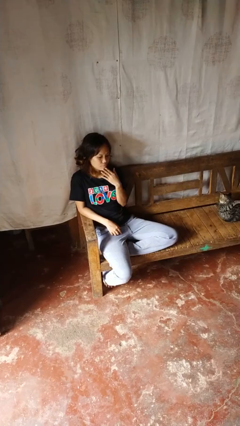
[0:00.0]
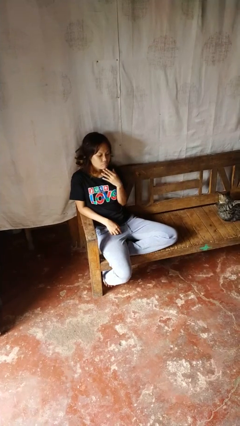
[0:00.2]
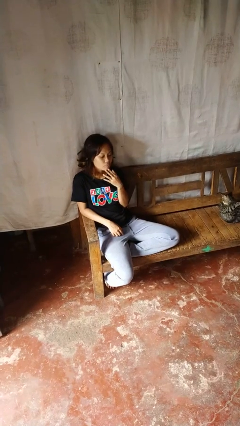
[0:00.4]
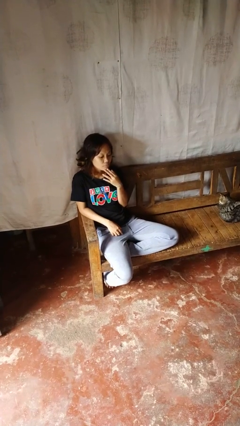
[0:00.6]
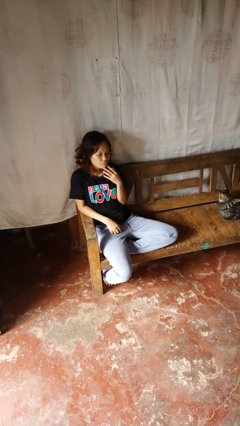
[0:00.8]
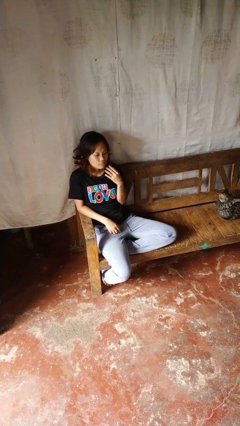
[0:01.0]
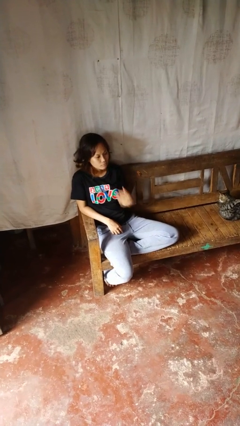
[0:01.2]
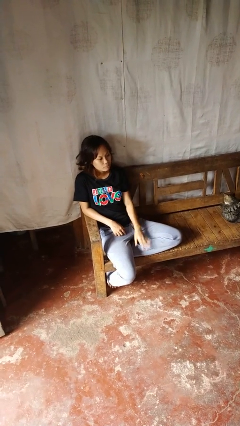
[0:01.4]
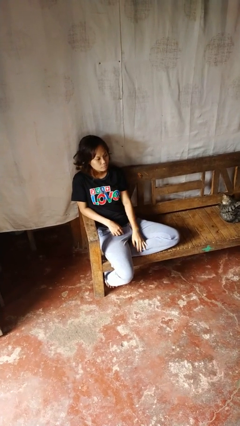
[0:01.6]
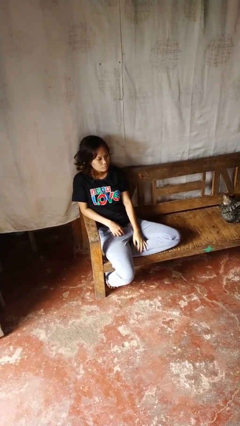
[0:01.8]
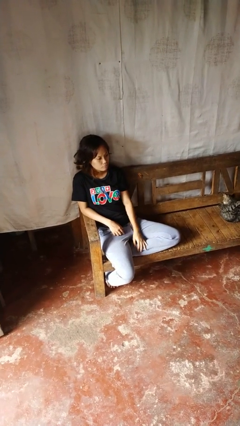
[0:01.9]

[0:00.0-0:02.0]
person strokes chin

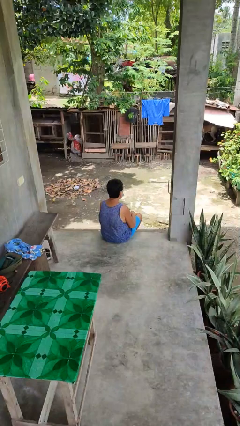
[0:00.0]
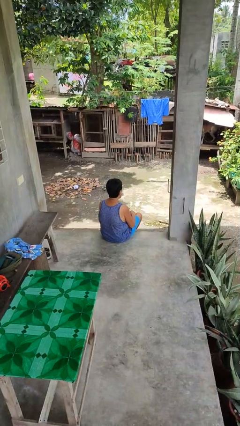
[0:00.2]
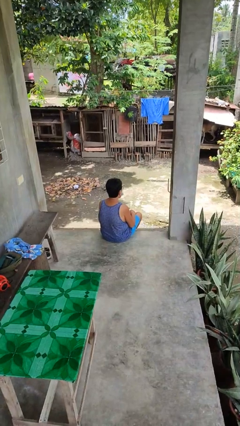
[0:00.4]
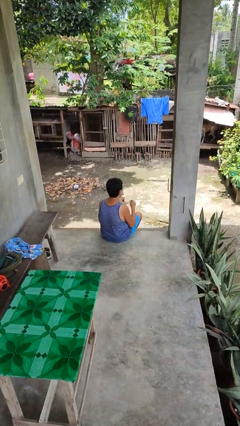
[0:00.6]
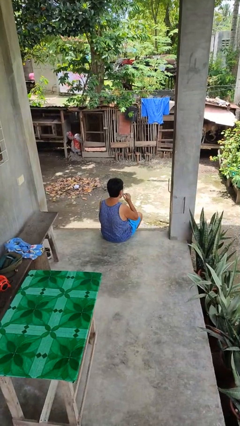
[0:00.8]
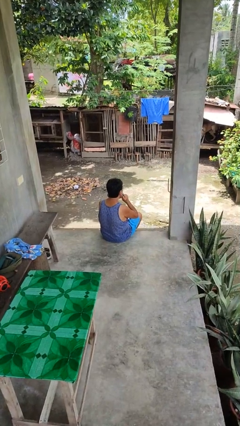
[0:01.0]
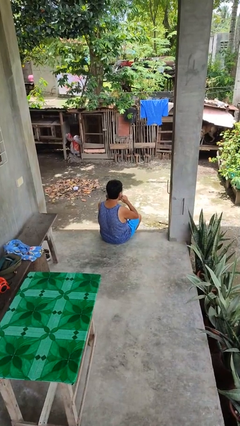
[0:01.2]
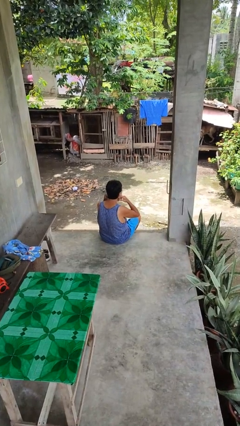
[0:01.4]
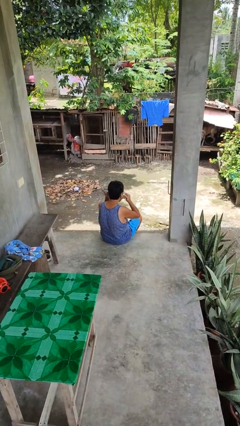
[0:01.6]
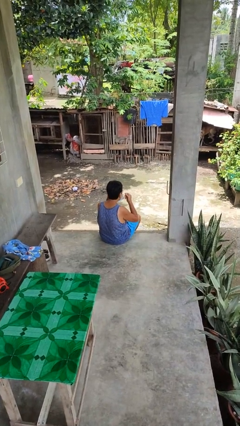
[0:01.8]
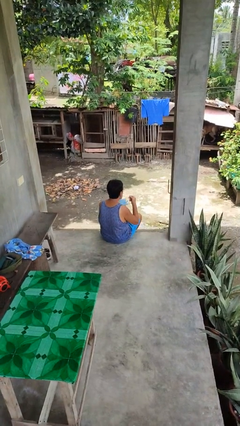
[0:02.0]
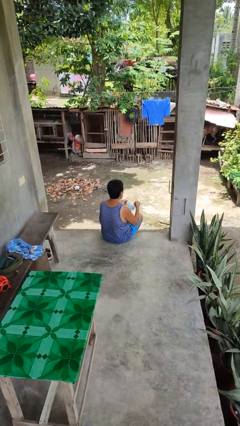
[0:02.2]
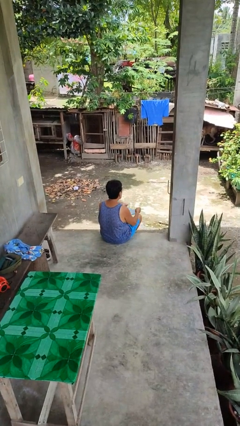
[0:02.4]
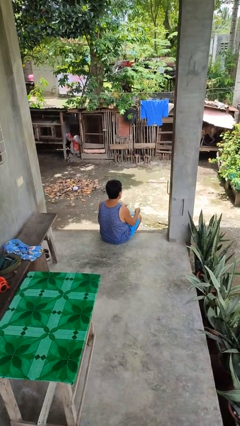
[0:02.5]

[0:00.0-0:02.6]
person takes off facemask

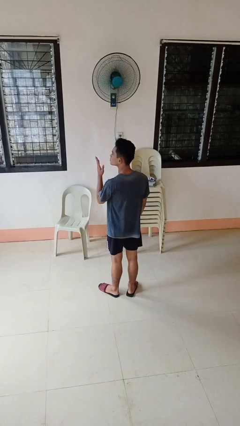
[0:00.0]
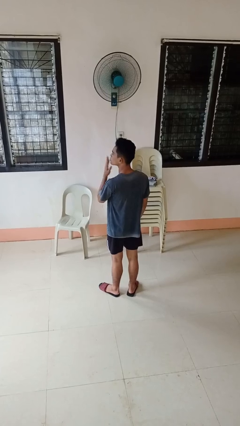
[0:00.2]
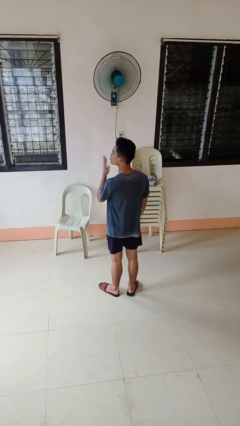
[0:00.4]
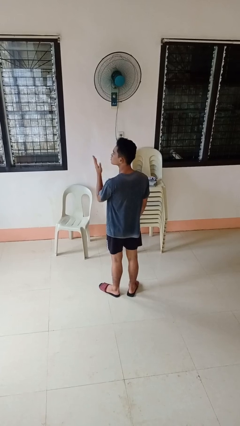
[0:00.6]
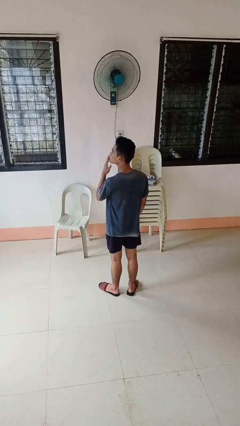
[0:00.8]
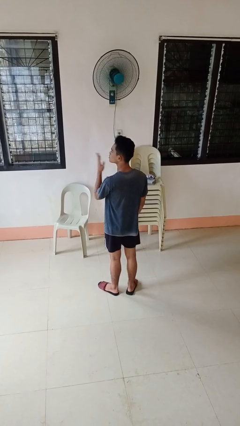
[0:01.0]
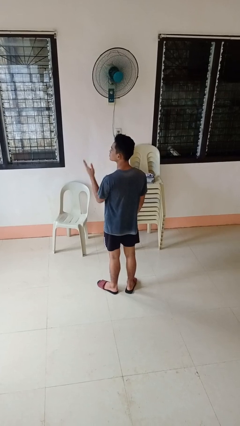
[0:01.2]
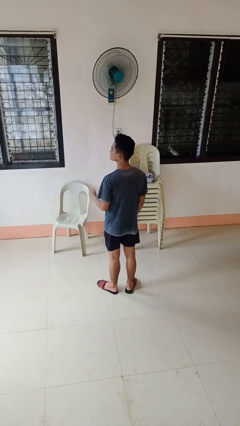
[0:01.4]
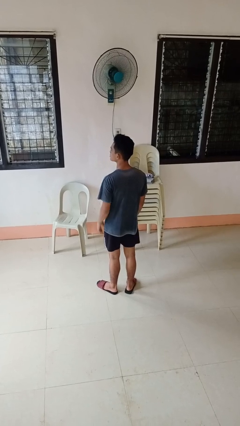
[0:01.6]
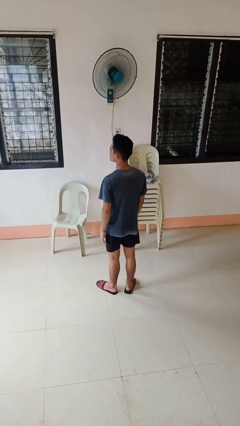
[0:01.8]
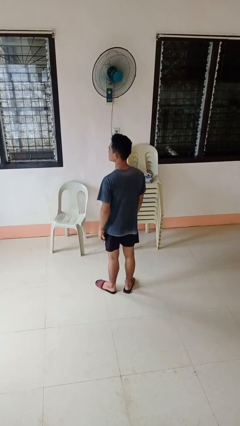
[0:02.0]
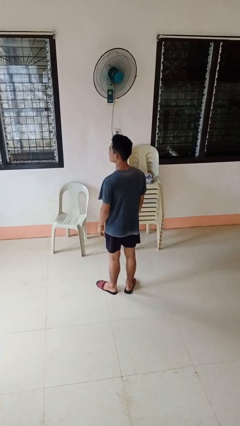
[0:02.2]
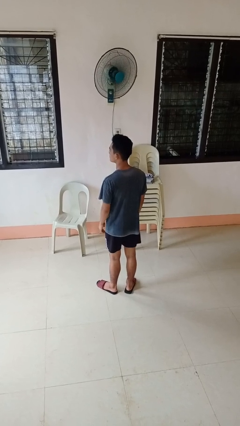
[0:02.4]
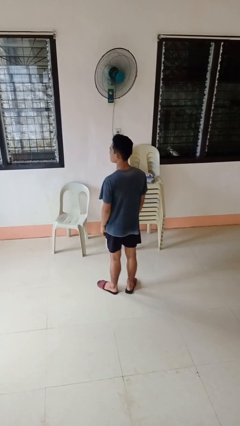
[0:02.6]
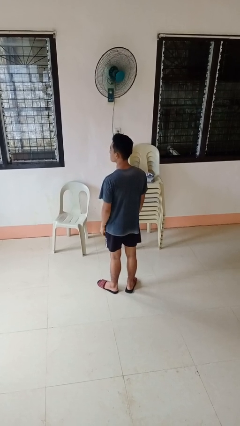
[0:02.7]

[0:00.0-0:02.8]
person gestures blow kiss

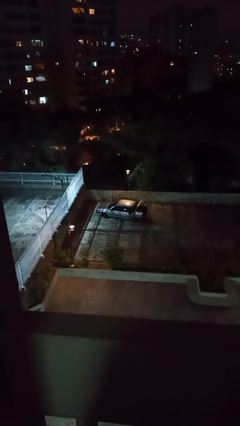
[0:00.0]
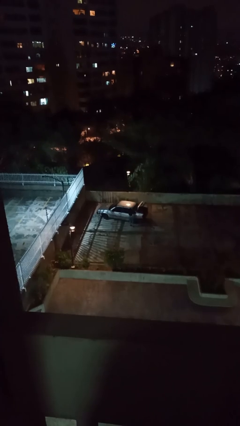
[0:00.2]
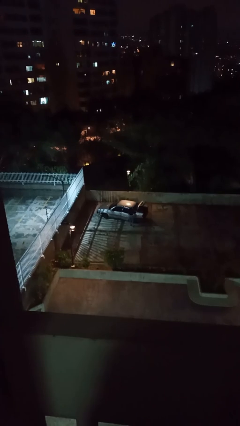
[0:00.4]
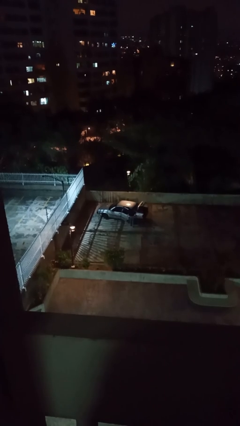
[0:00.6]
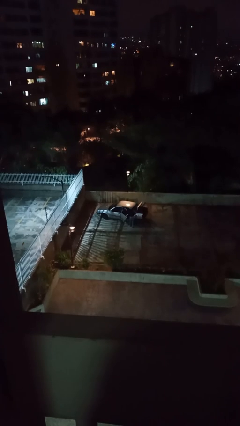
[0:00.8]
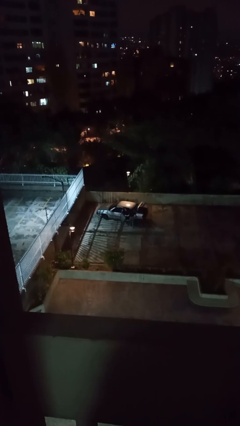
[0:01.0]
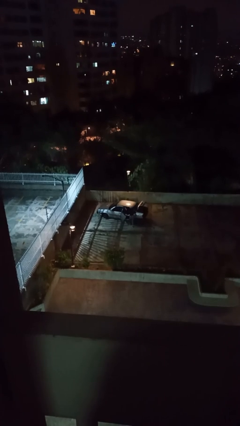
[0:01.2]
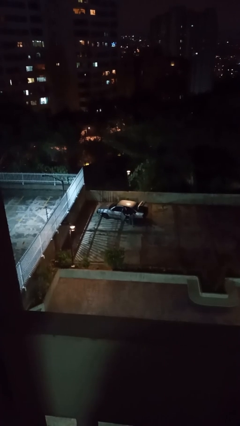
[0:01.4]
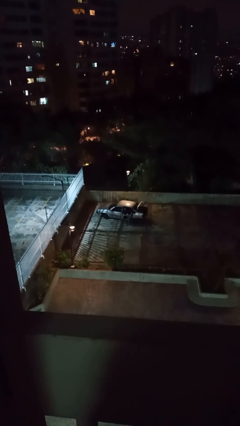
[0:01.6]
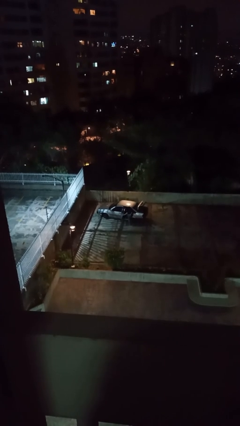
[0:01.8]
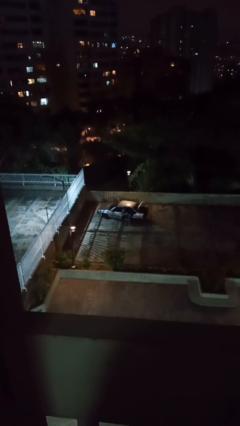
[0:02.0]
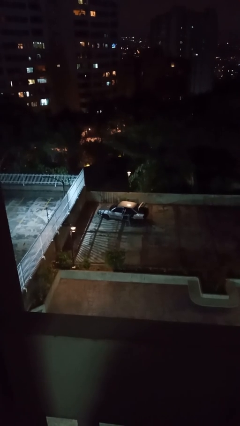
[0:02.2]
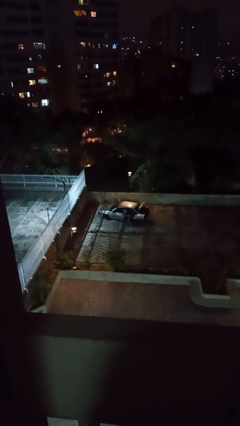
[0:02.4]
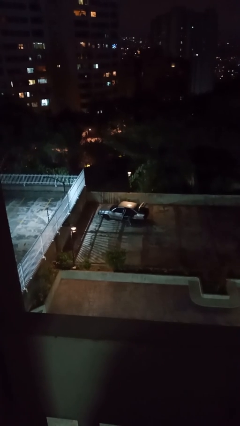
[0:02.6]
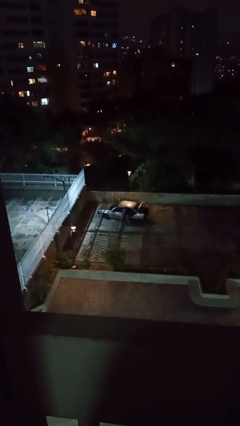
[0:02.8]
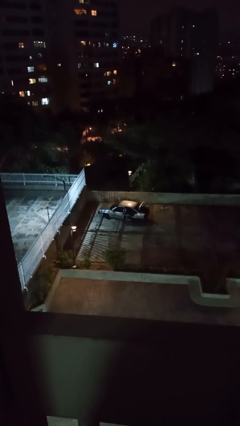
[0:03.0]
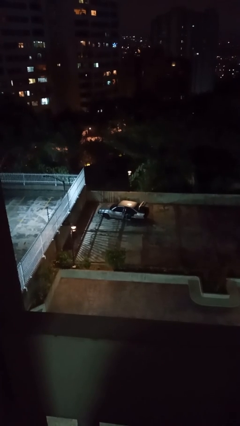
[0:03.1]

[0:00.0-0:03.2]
car picks up person

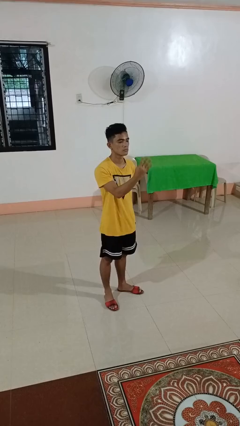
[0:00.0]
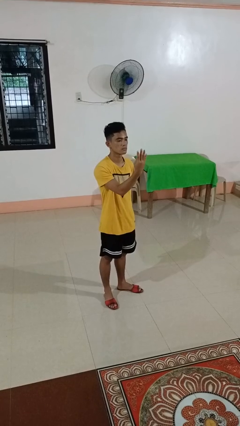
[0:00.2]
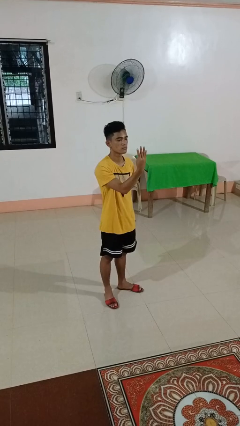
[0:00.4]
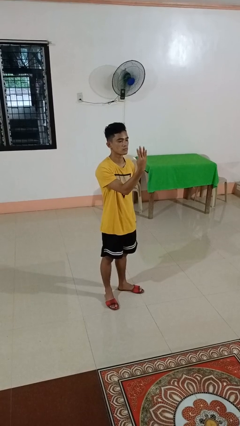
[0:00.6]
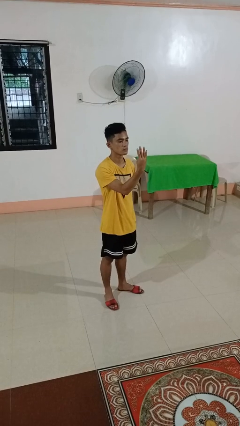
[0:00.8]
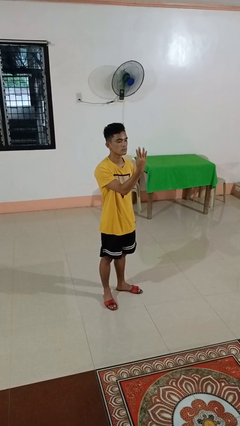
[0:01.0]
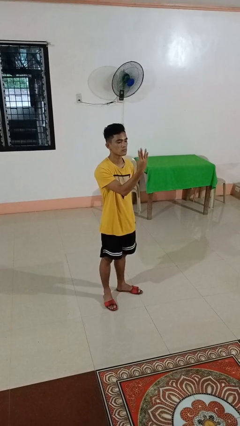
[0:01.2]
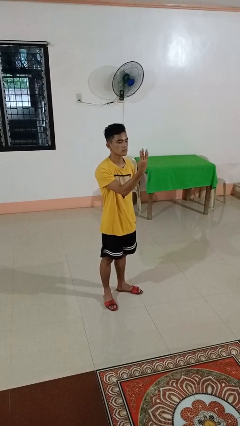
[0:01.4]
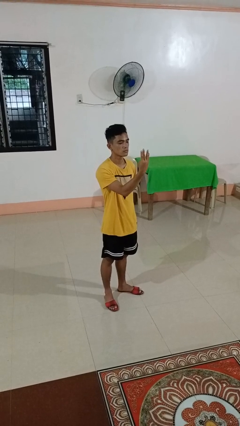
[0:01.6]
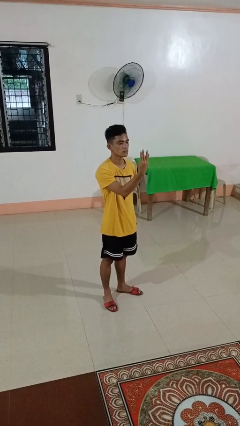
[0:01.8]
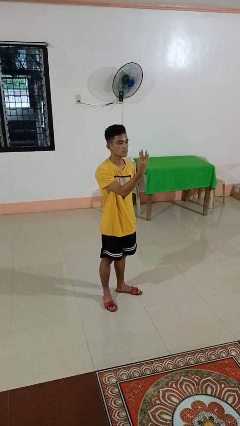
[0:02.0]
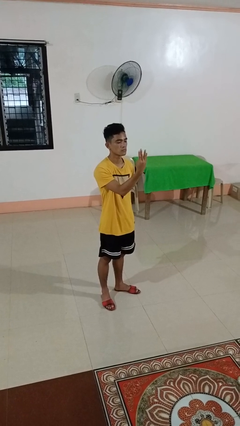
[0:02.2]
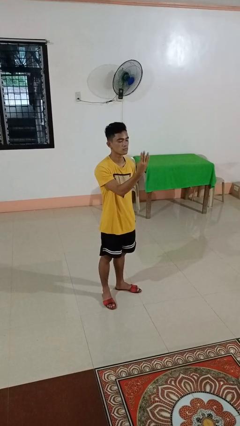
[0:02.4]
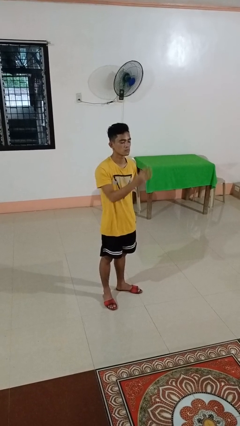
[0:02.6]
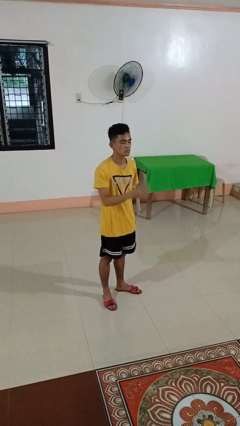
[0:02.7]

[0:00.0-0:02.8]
person gestures number four

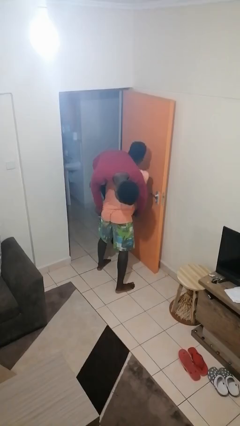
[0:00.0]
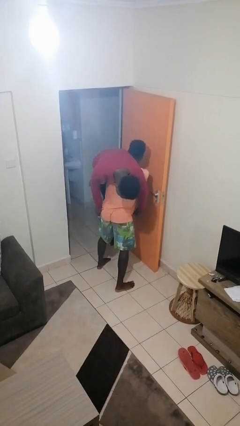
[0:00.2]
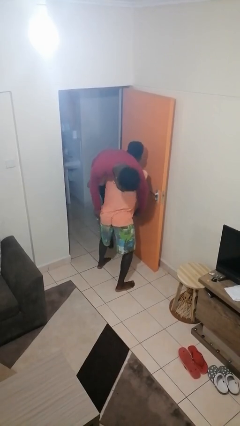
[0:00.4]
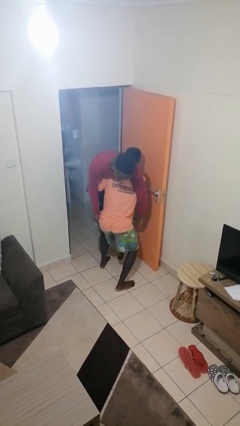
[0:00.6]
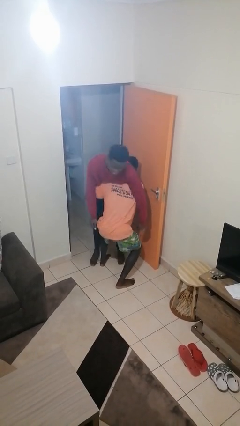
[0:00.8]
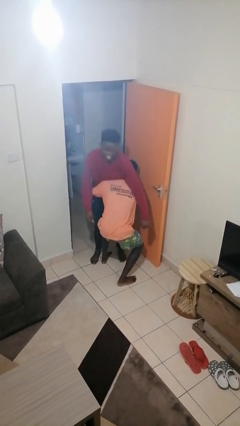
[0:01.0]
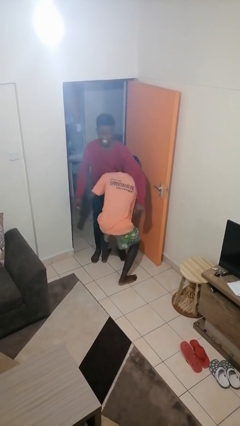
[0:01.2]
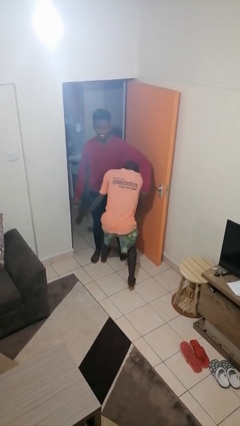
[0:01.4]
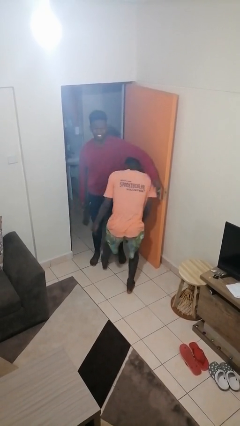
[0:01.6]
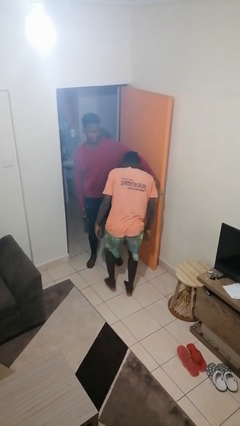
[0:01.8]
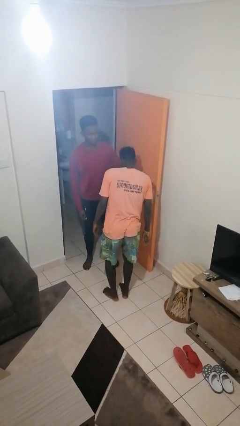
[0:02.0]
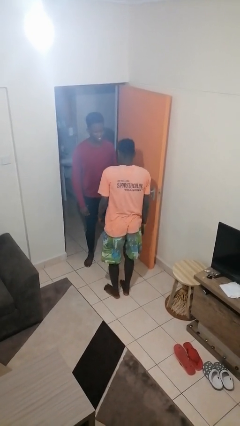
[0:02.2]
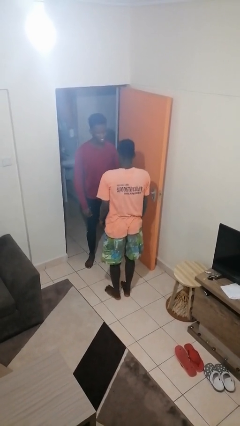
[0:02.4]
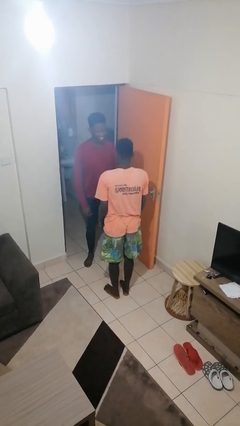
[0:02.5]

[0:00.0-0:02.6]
person puts down person

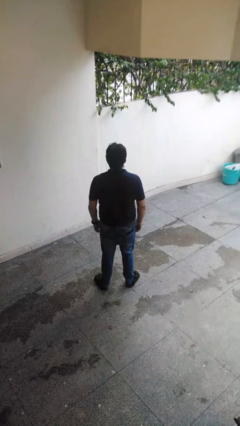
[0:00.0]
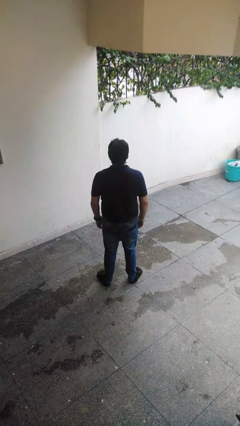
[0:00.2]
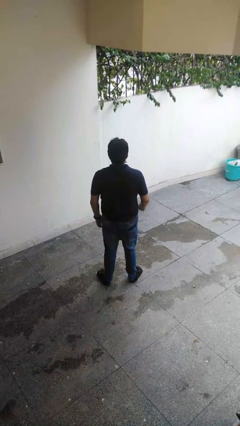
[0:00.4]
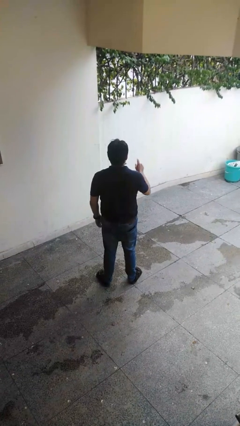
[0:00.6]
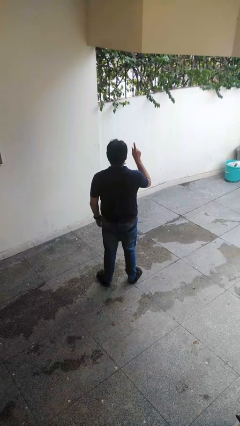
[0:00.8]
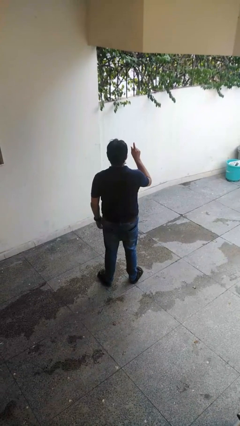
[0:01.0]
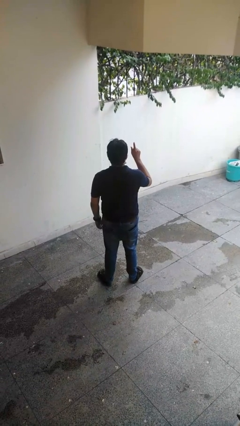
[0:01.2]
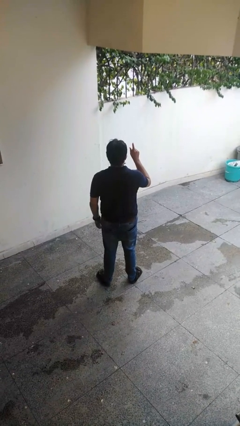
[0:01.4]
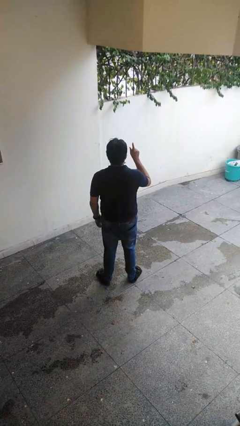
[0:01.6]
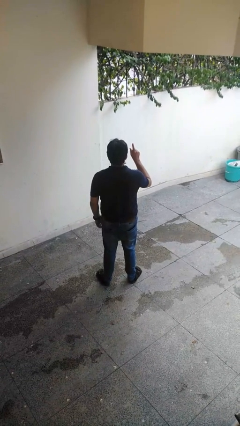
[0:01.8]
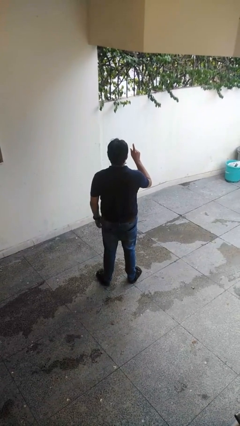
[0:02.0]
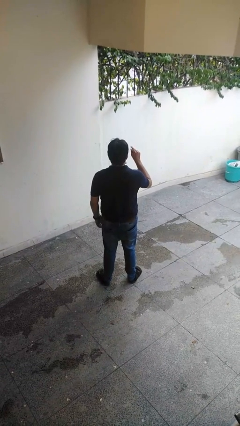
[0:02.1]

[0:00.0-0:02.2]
person gestures number one
